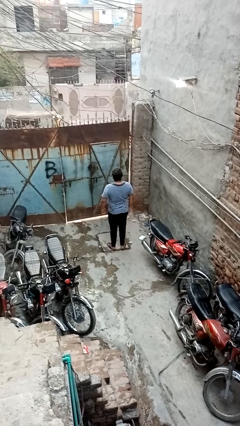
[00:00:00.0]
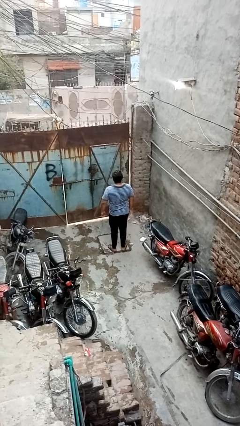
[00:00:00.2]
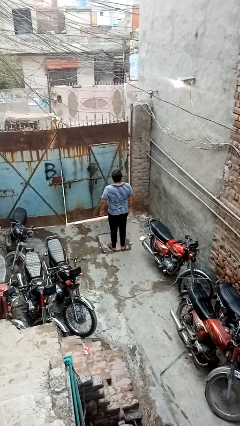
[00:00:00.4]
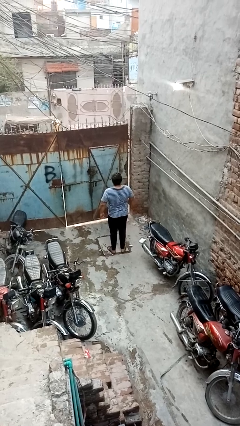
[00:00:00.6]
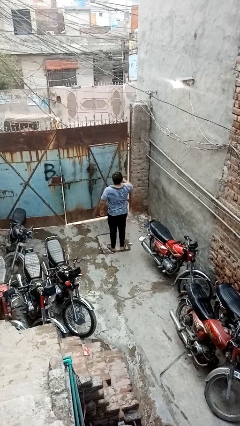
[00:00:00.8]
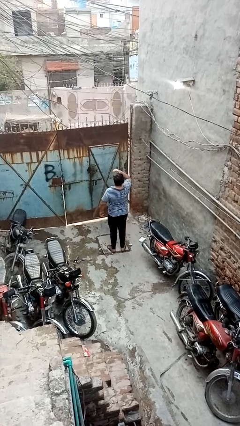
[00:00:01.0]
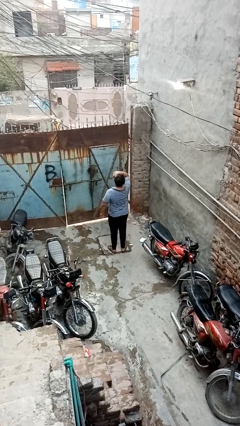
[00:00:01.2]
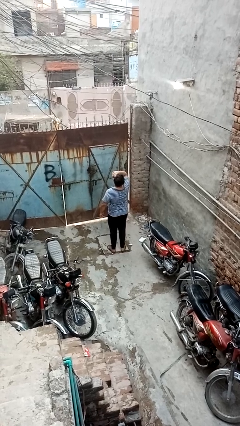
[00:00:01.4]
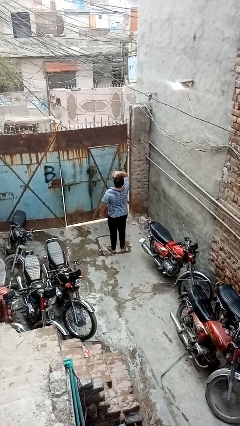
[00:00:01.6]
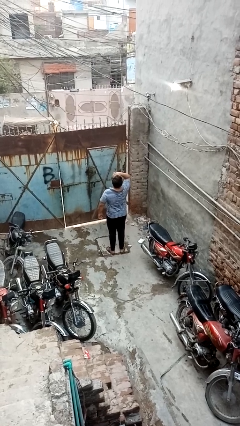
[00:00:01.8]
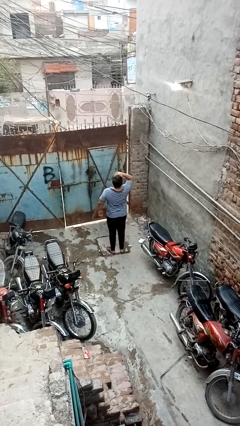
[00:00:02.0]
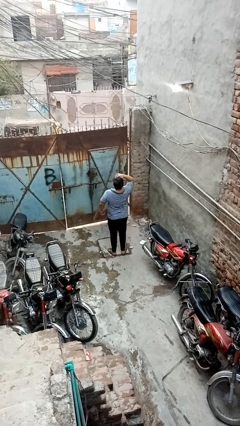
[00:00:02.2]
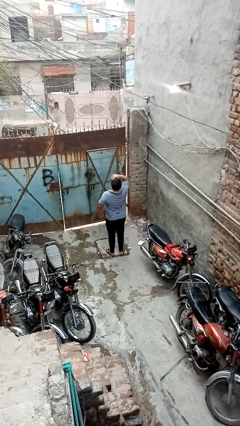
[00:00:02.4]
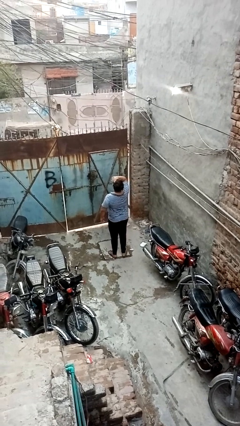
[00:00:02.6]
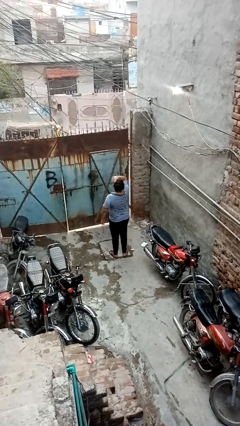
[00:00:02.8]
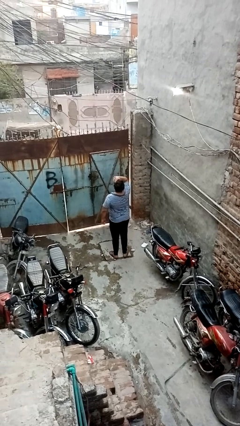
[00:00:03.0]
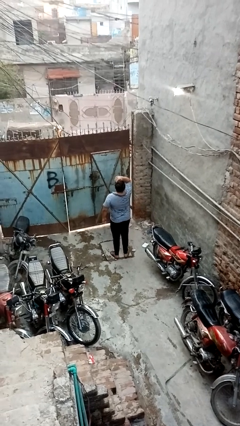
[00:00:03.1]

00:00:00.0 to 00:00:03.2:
person shades eyes

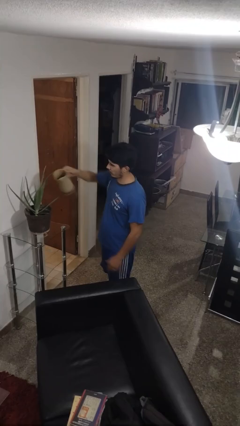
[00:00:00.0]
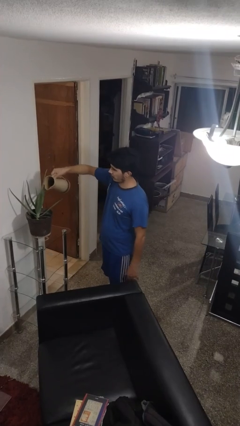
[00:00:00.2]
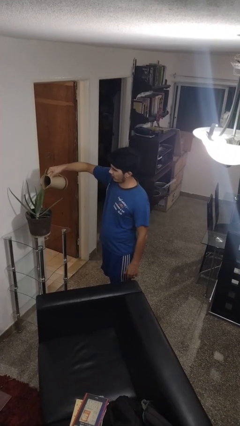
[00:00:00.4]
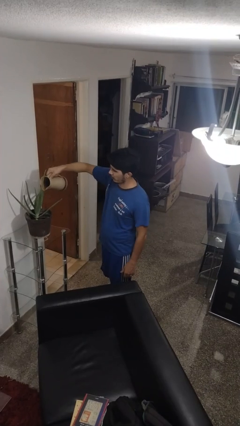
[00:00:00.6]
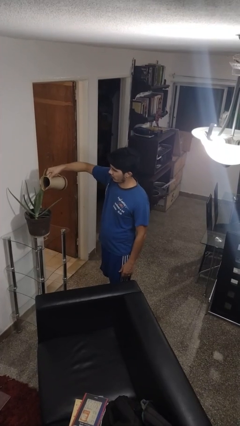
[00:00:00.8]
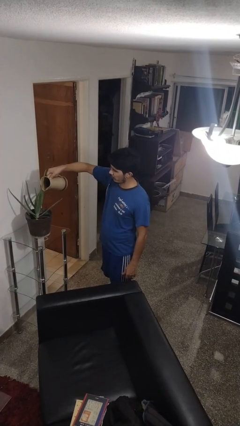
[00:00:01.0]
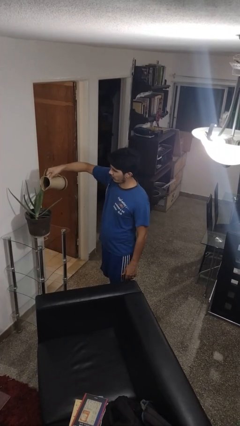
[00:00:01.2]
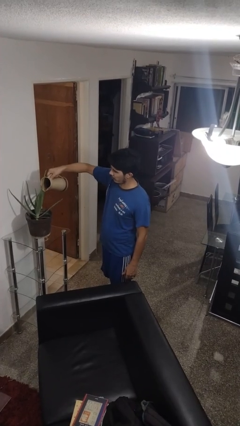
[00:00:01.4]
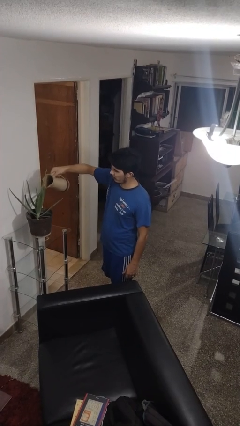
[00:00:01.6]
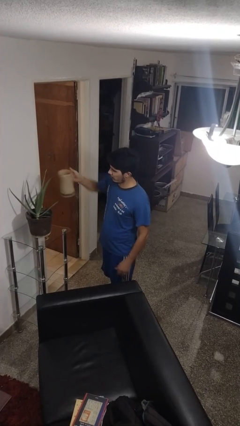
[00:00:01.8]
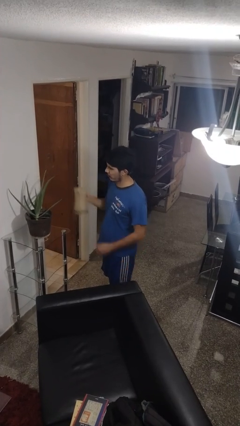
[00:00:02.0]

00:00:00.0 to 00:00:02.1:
person waters houseplant

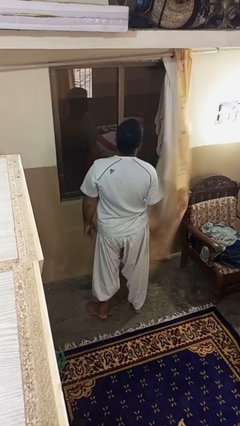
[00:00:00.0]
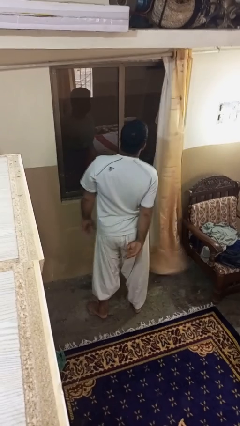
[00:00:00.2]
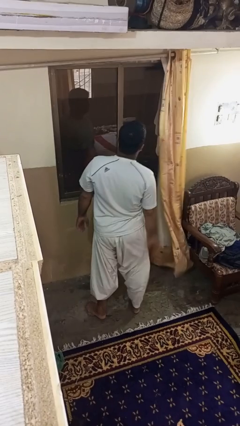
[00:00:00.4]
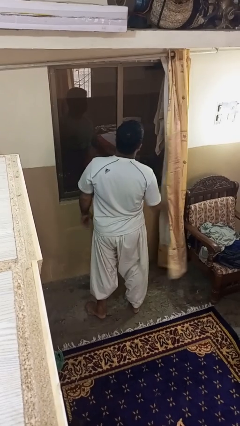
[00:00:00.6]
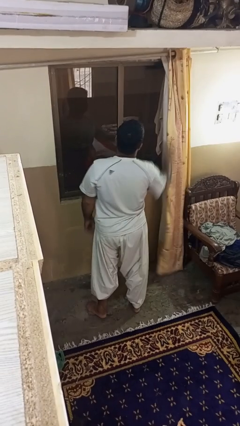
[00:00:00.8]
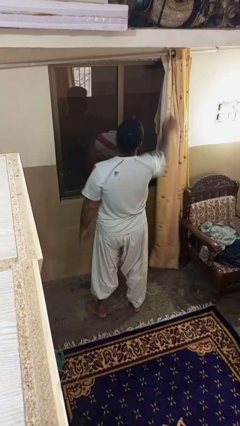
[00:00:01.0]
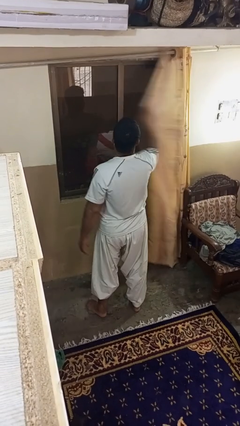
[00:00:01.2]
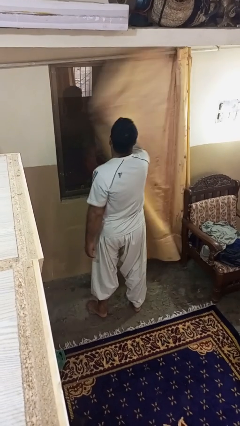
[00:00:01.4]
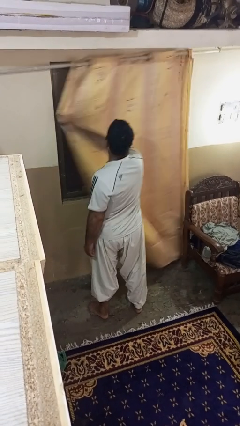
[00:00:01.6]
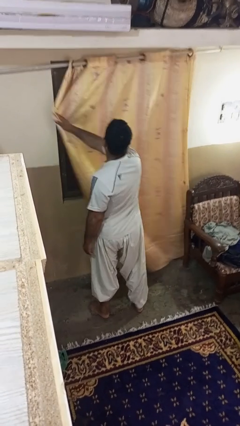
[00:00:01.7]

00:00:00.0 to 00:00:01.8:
person closes curtains

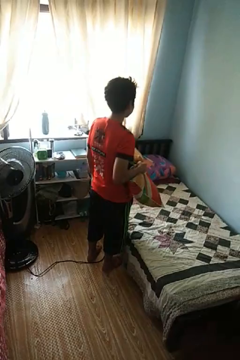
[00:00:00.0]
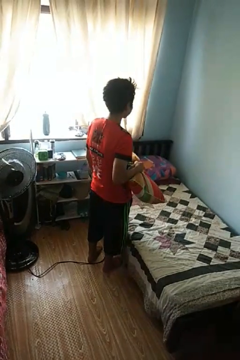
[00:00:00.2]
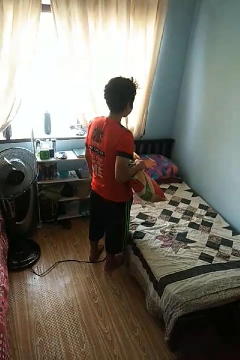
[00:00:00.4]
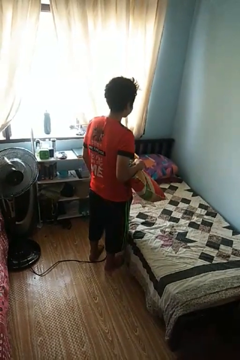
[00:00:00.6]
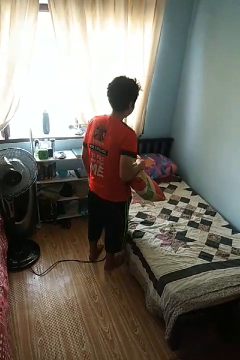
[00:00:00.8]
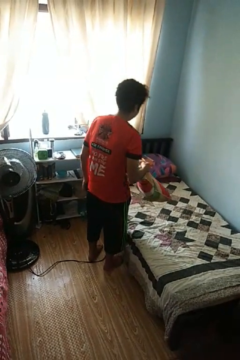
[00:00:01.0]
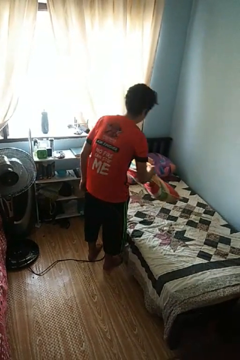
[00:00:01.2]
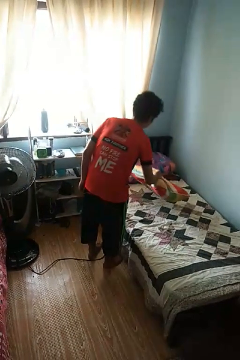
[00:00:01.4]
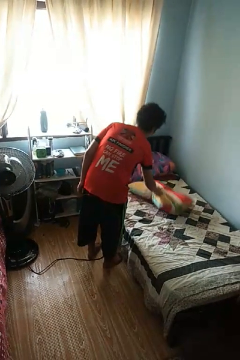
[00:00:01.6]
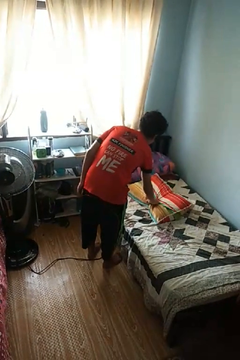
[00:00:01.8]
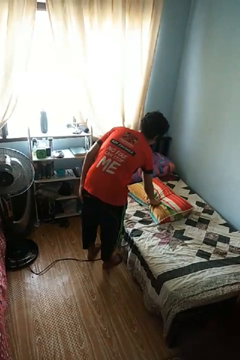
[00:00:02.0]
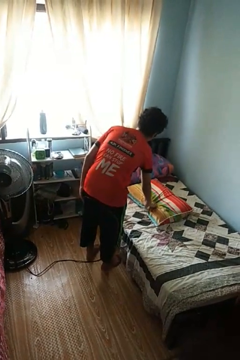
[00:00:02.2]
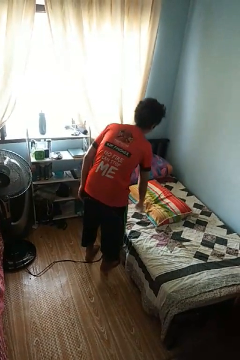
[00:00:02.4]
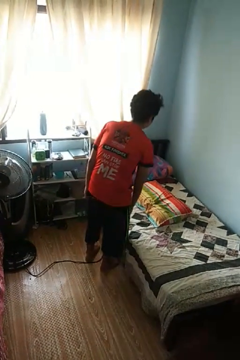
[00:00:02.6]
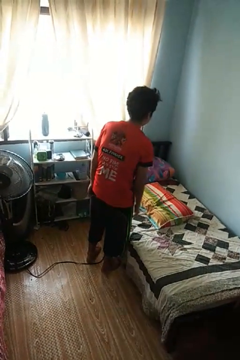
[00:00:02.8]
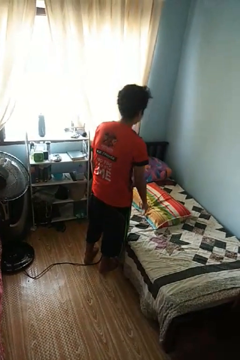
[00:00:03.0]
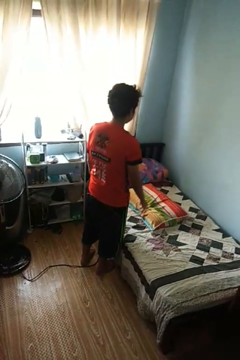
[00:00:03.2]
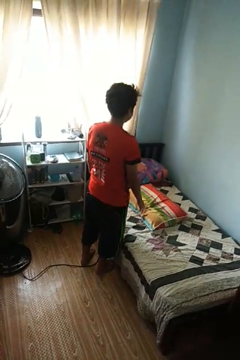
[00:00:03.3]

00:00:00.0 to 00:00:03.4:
person puts down object on bed

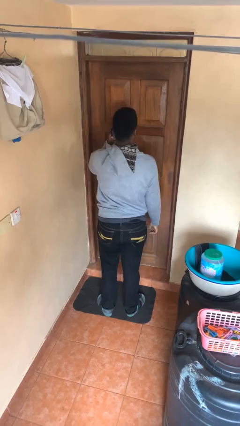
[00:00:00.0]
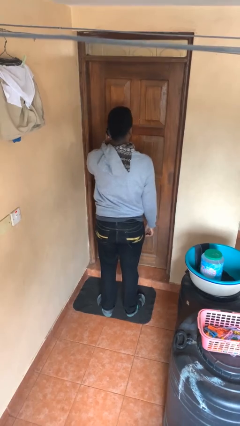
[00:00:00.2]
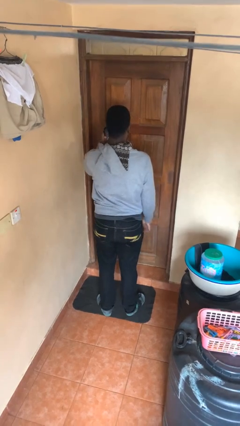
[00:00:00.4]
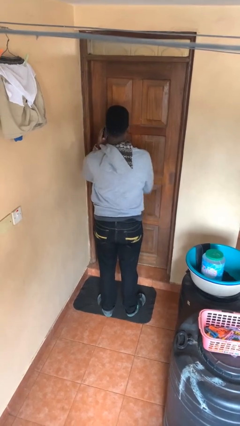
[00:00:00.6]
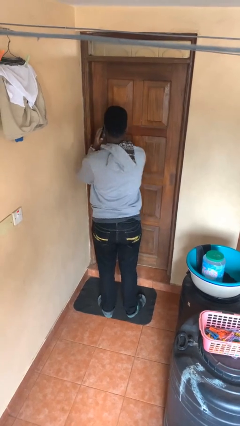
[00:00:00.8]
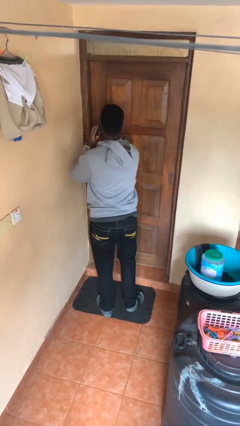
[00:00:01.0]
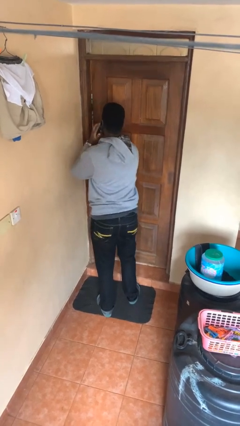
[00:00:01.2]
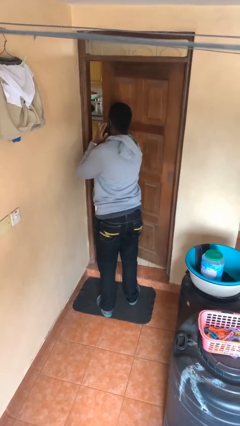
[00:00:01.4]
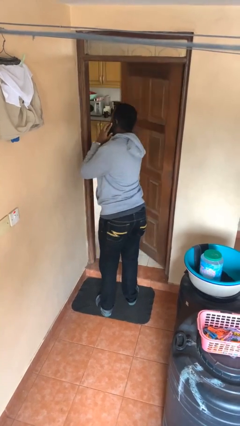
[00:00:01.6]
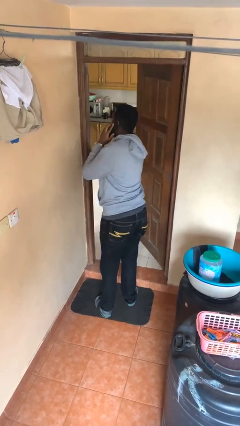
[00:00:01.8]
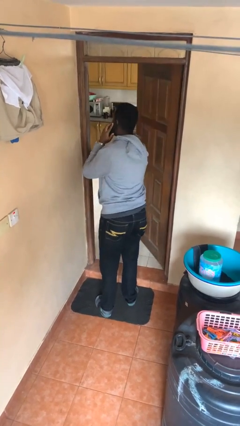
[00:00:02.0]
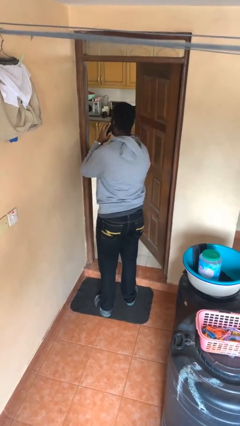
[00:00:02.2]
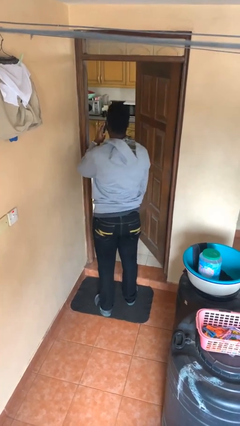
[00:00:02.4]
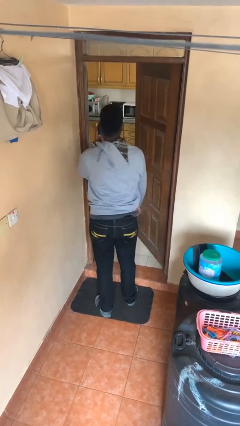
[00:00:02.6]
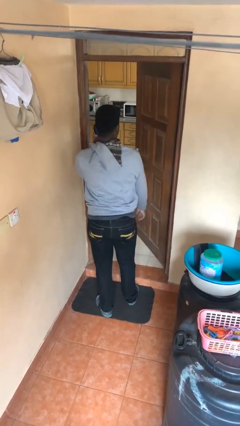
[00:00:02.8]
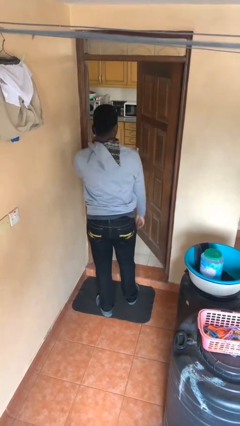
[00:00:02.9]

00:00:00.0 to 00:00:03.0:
person opens facility door

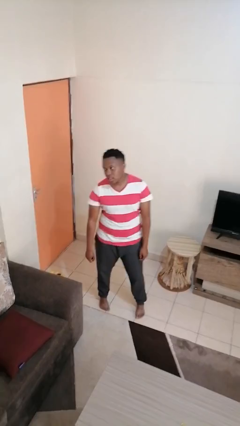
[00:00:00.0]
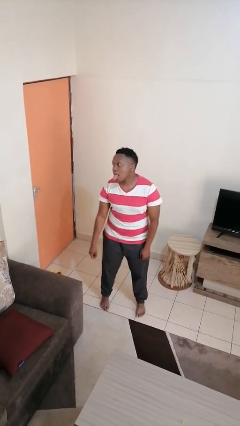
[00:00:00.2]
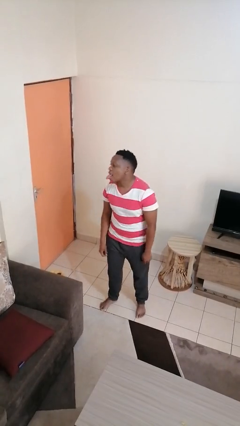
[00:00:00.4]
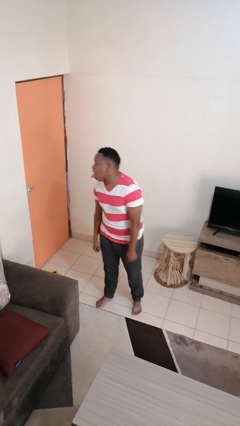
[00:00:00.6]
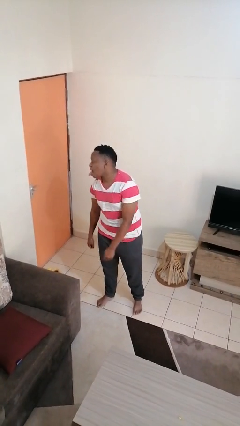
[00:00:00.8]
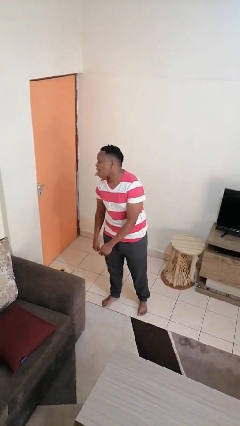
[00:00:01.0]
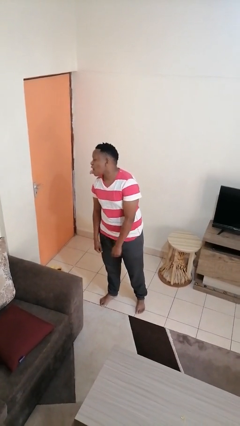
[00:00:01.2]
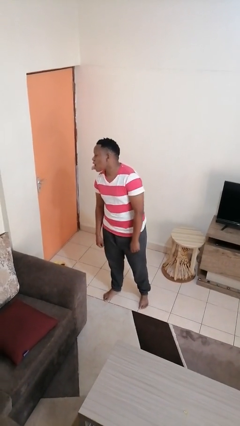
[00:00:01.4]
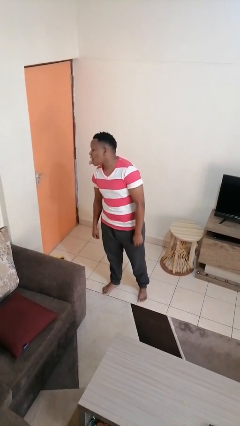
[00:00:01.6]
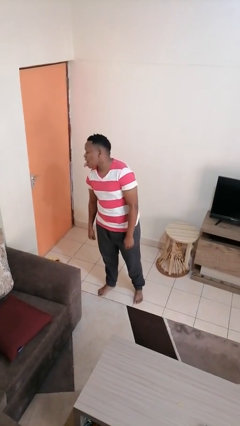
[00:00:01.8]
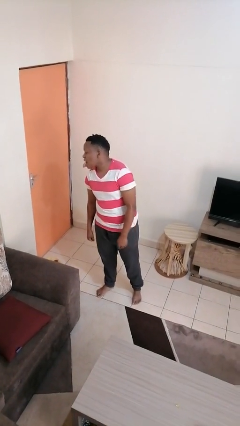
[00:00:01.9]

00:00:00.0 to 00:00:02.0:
person sticks out tongue

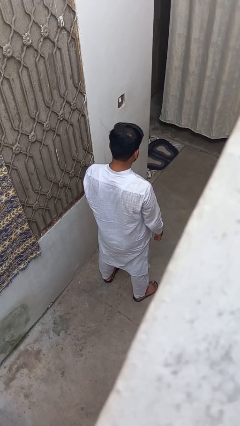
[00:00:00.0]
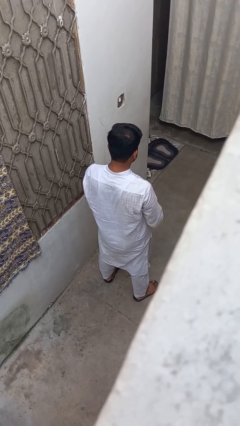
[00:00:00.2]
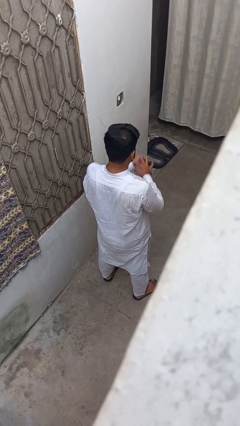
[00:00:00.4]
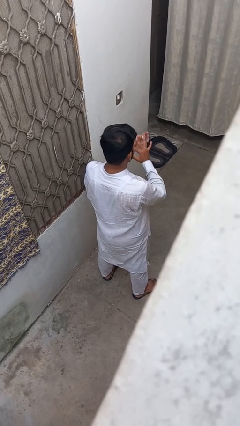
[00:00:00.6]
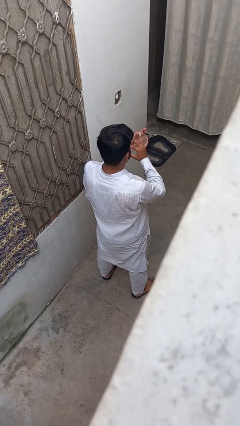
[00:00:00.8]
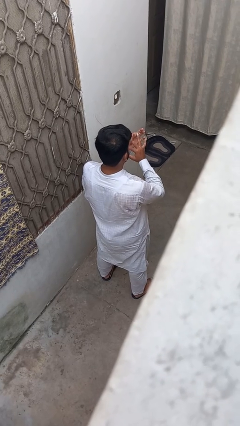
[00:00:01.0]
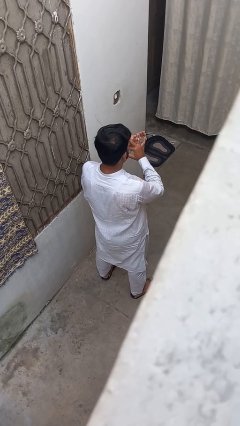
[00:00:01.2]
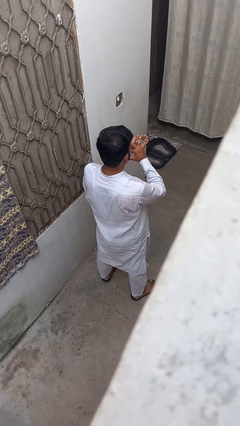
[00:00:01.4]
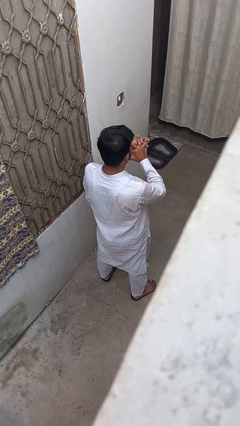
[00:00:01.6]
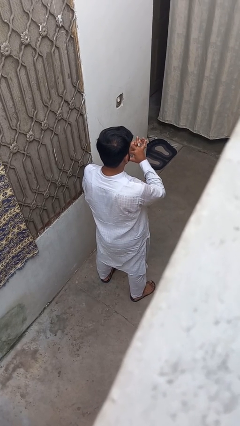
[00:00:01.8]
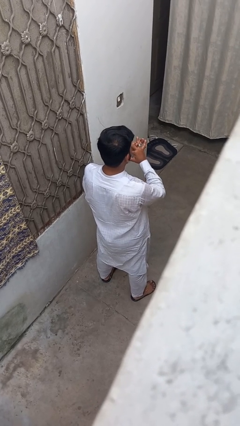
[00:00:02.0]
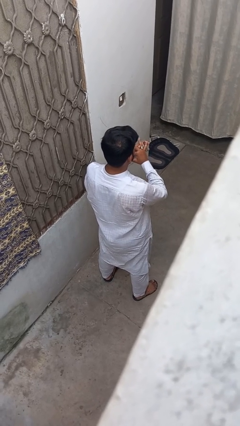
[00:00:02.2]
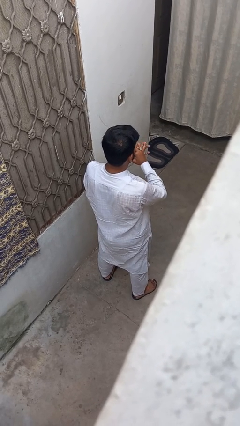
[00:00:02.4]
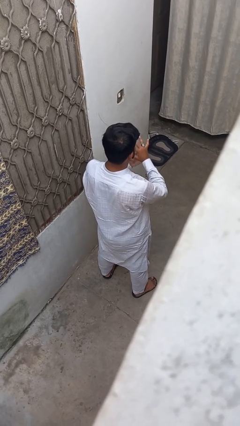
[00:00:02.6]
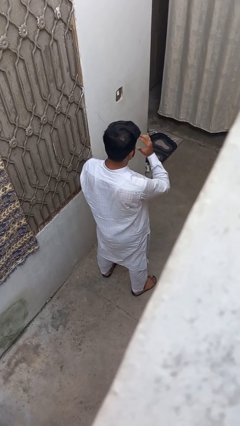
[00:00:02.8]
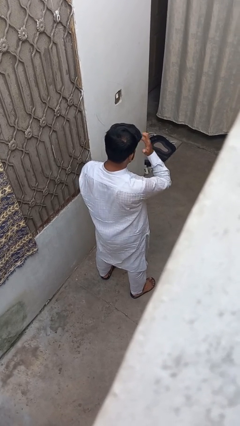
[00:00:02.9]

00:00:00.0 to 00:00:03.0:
person puts on ring
